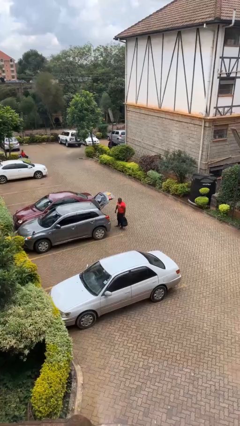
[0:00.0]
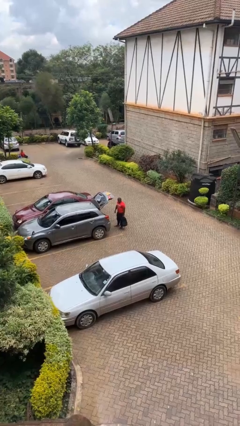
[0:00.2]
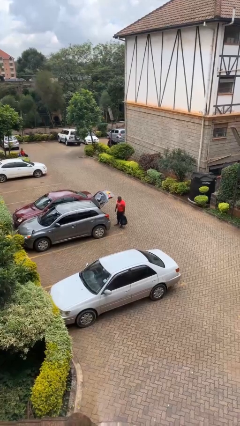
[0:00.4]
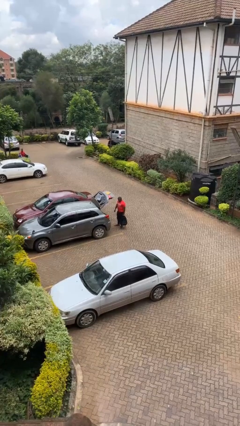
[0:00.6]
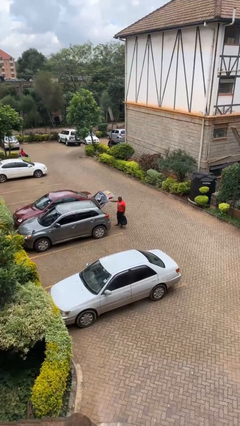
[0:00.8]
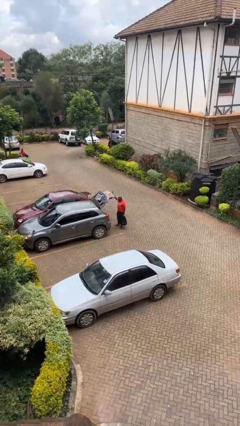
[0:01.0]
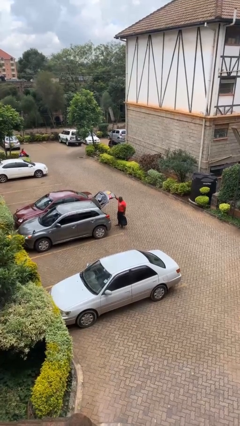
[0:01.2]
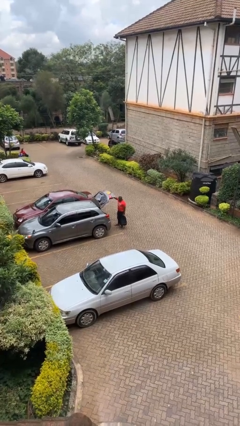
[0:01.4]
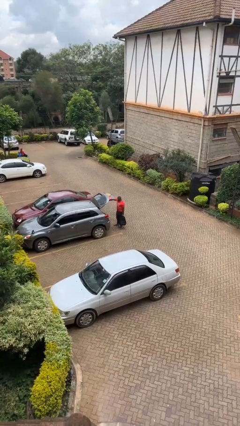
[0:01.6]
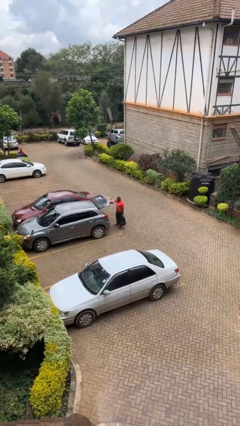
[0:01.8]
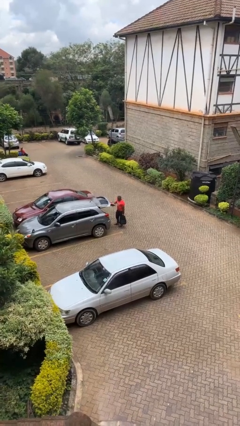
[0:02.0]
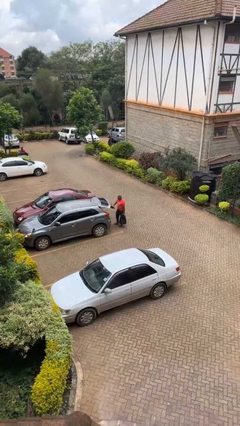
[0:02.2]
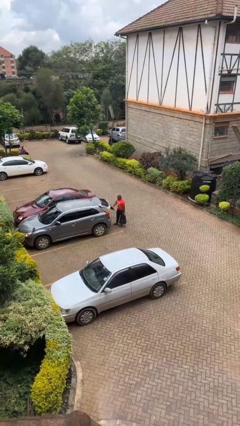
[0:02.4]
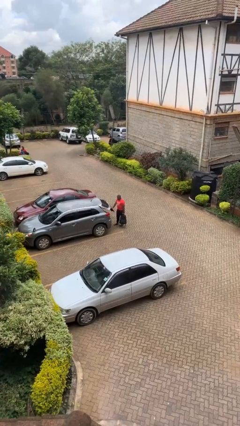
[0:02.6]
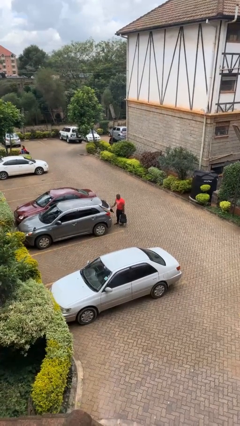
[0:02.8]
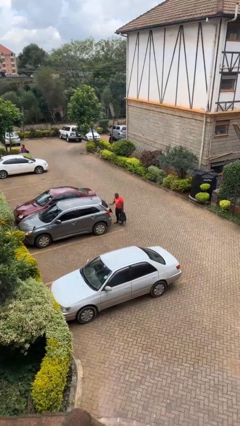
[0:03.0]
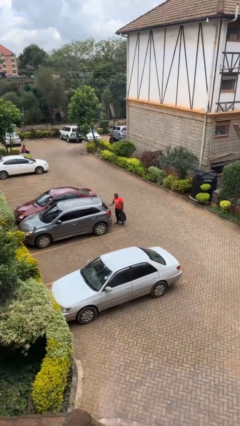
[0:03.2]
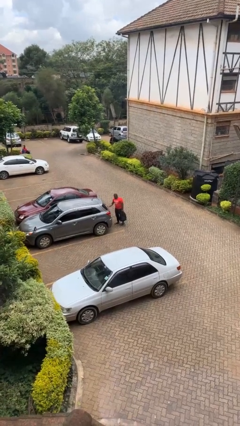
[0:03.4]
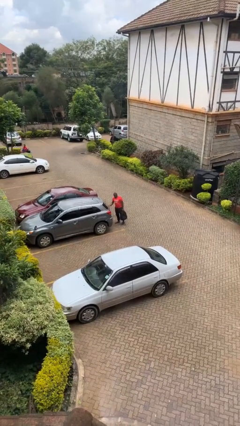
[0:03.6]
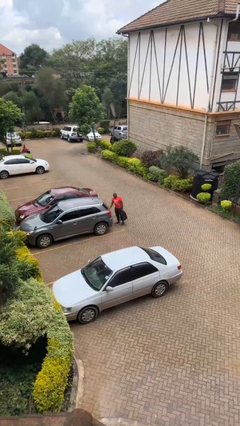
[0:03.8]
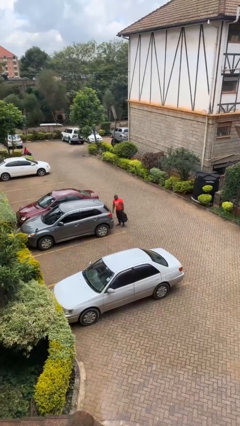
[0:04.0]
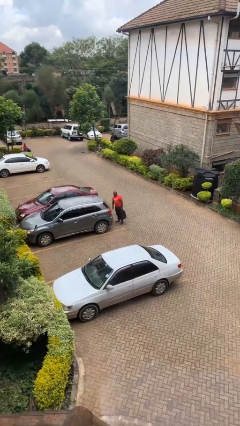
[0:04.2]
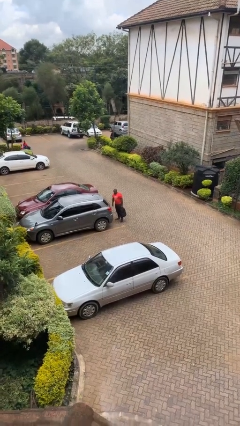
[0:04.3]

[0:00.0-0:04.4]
person closes car trunk

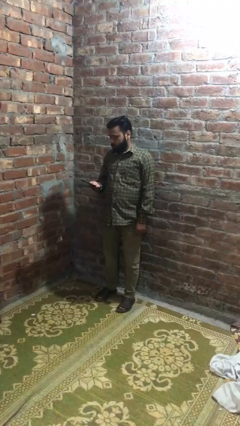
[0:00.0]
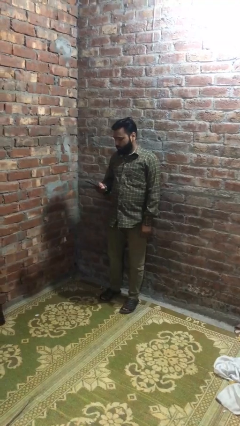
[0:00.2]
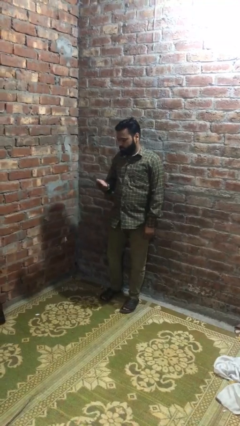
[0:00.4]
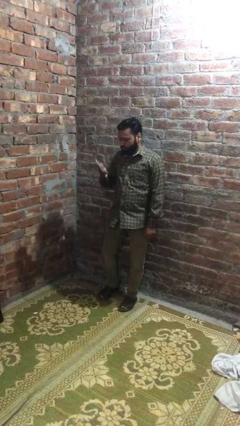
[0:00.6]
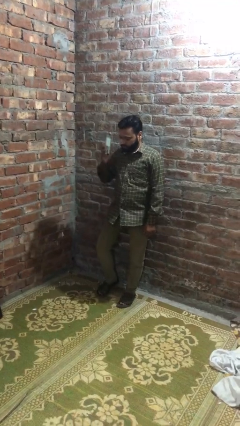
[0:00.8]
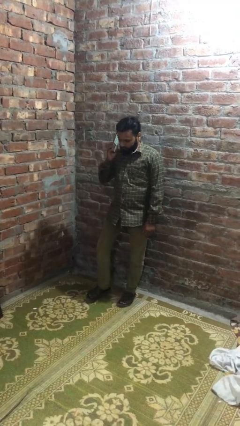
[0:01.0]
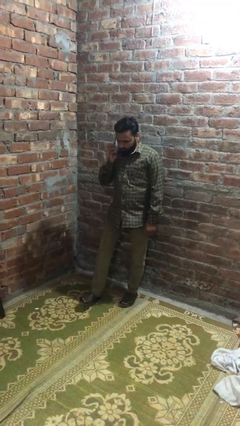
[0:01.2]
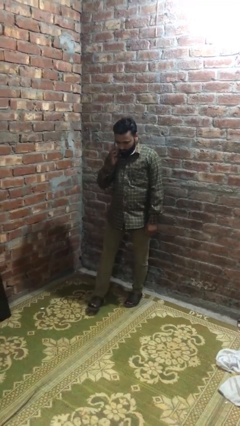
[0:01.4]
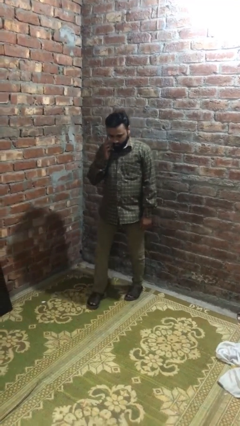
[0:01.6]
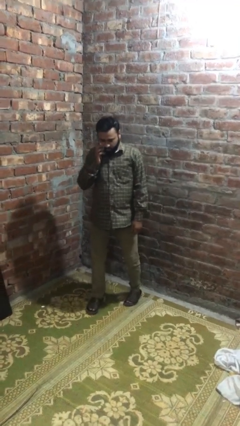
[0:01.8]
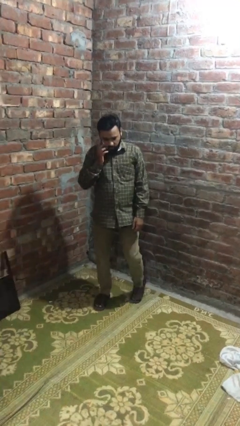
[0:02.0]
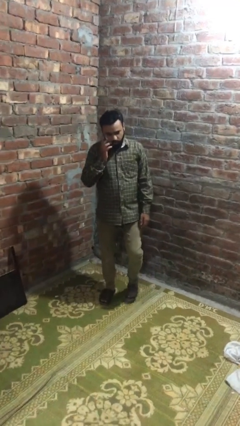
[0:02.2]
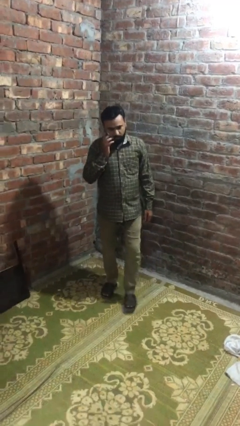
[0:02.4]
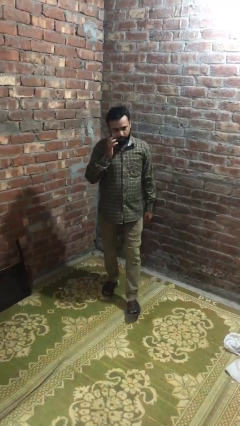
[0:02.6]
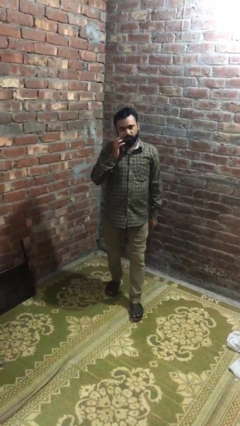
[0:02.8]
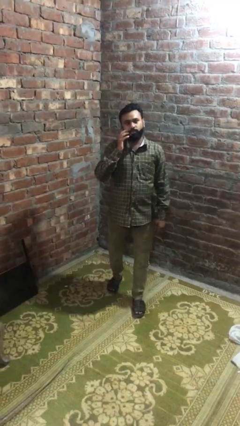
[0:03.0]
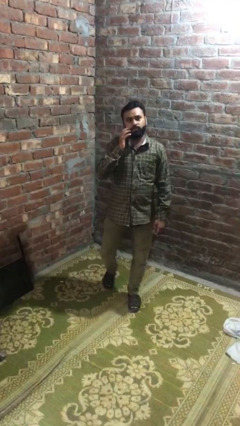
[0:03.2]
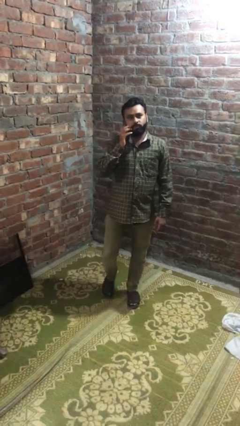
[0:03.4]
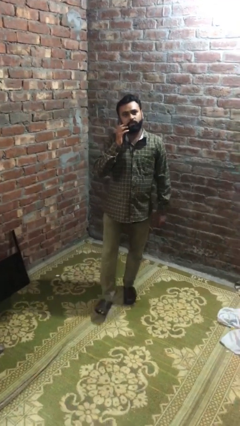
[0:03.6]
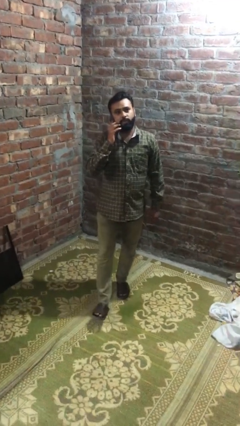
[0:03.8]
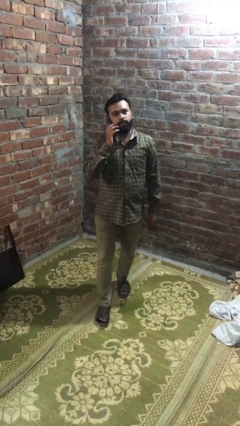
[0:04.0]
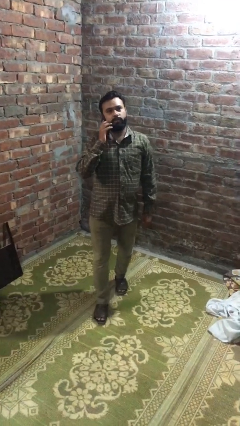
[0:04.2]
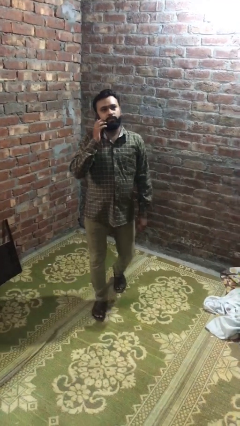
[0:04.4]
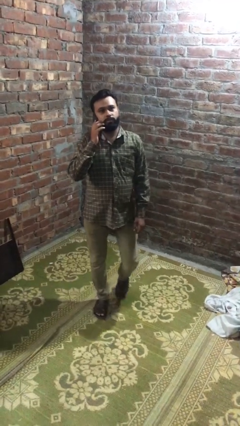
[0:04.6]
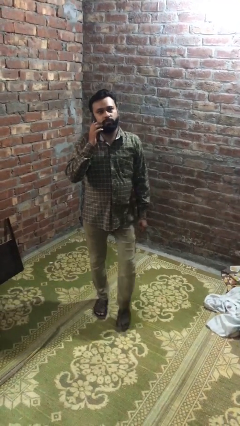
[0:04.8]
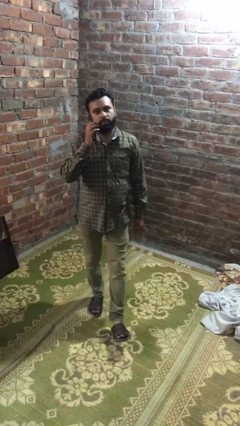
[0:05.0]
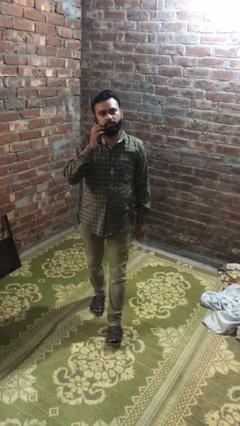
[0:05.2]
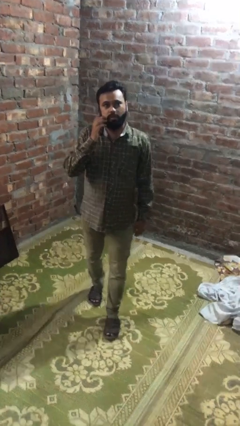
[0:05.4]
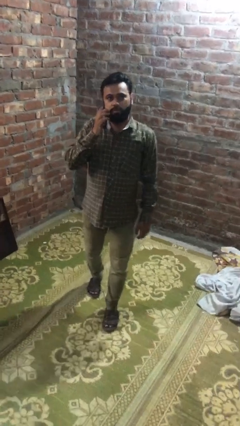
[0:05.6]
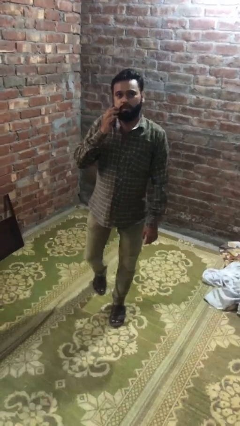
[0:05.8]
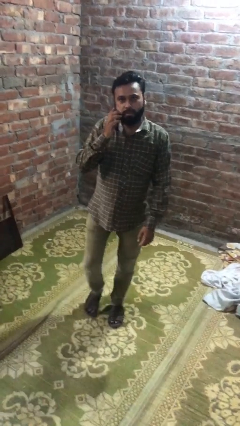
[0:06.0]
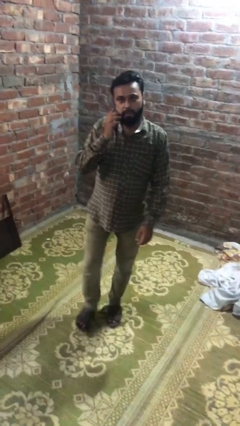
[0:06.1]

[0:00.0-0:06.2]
person talks on phone

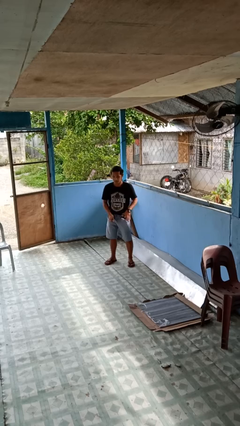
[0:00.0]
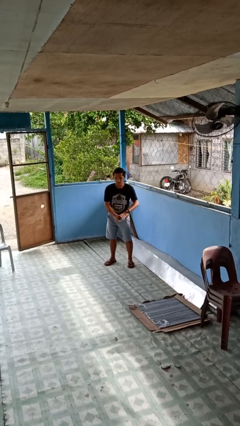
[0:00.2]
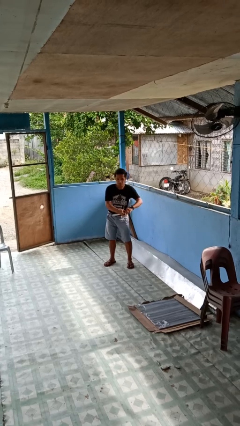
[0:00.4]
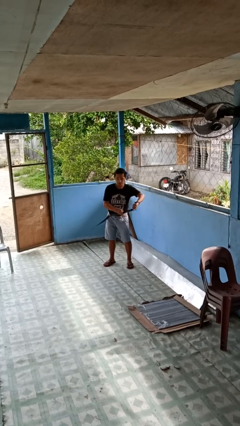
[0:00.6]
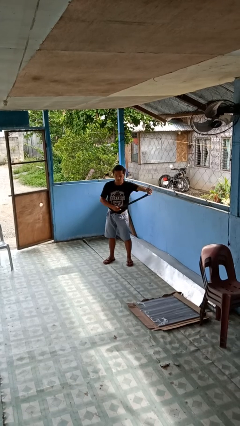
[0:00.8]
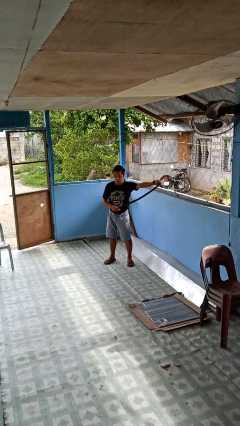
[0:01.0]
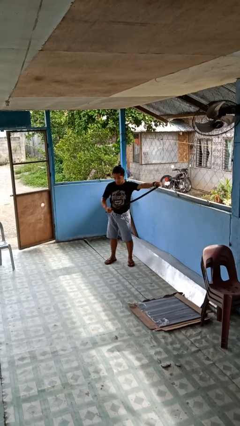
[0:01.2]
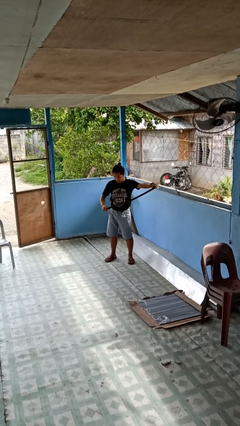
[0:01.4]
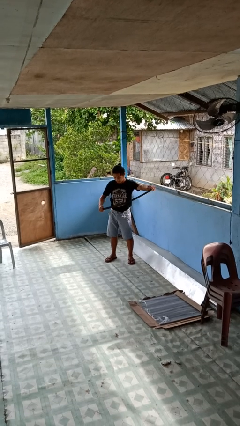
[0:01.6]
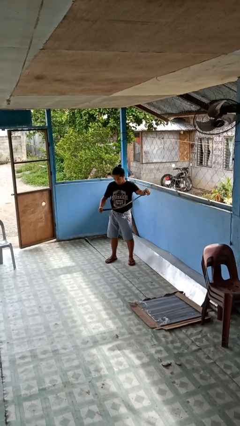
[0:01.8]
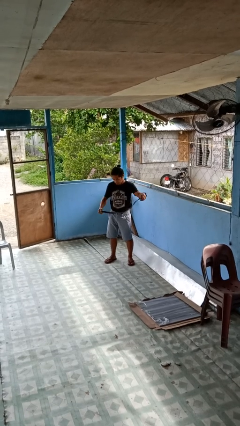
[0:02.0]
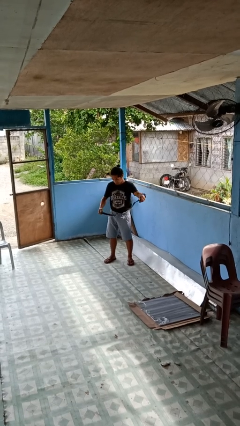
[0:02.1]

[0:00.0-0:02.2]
person takes off belt

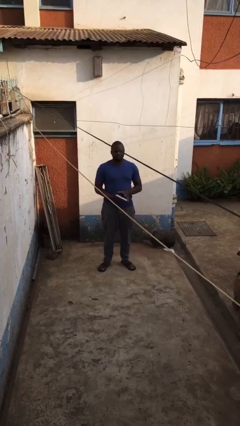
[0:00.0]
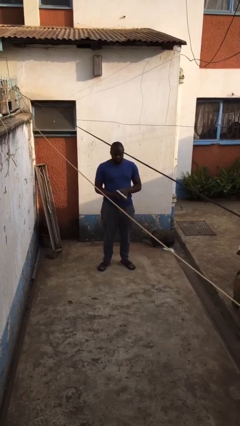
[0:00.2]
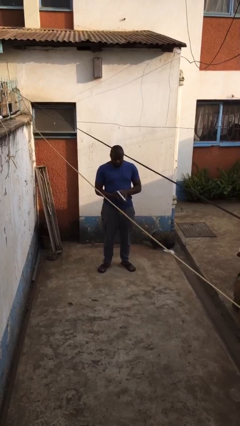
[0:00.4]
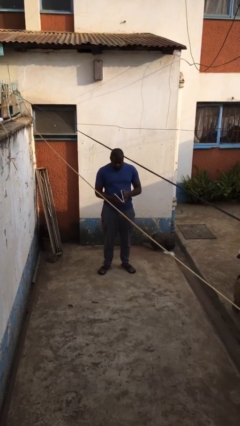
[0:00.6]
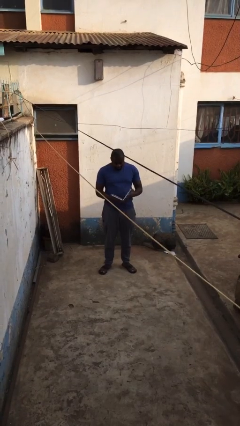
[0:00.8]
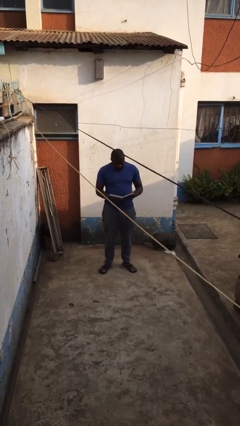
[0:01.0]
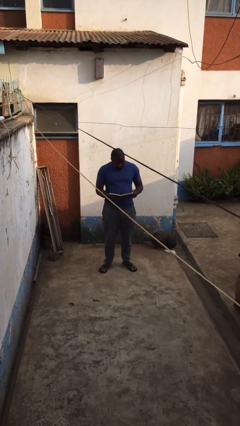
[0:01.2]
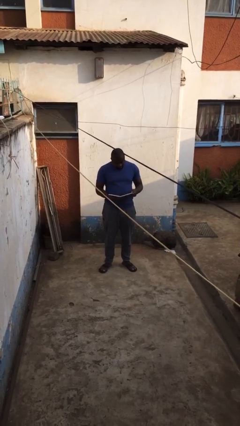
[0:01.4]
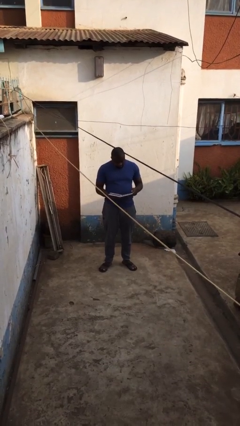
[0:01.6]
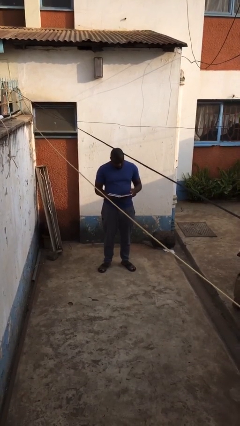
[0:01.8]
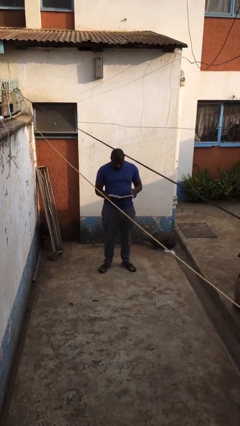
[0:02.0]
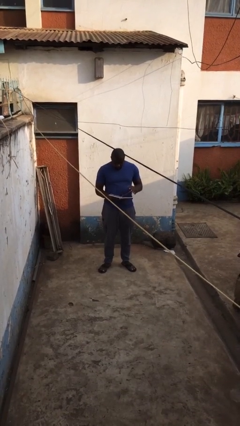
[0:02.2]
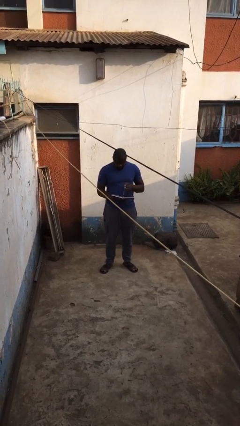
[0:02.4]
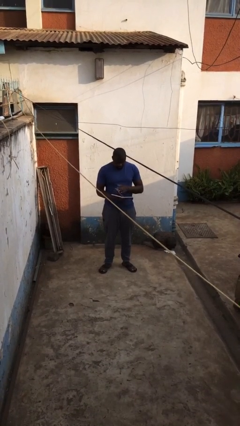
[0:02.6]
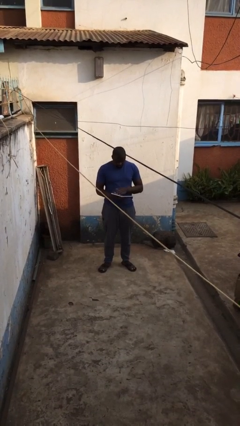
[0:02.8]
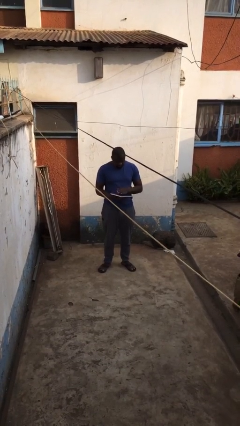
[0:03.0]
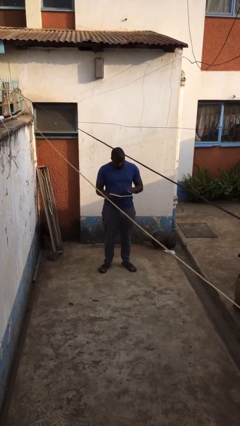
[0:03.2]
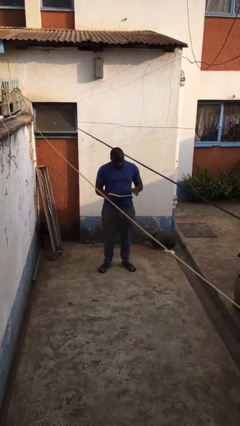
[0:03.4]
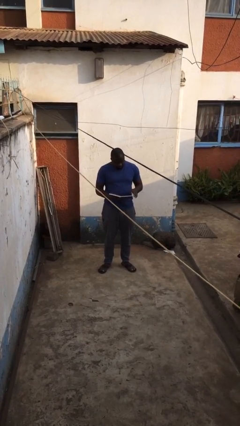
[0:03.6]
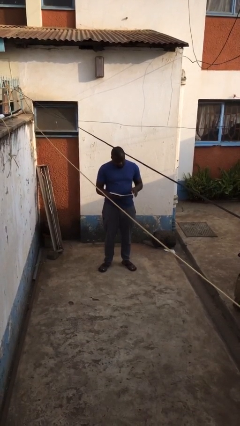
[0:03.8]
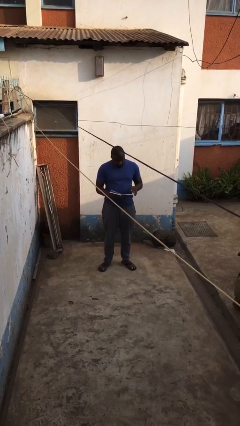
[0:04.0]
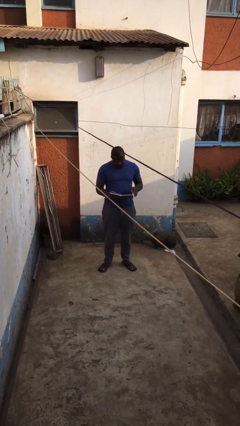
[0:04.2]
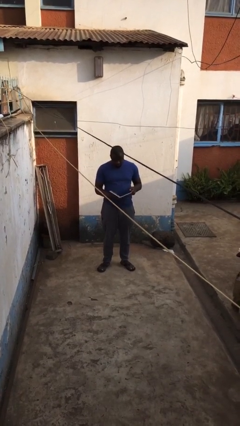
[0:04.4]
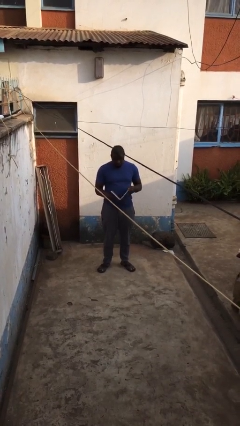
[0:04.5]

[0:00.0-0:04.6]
person reads book

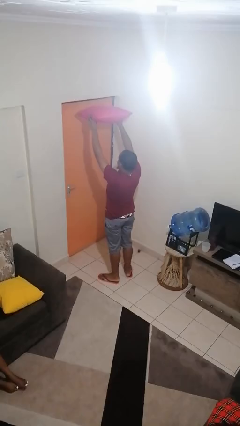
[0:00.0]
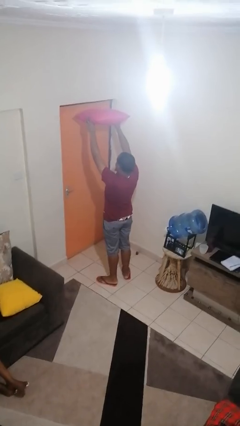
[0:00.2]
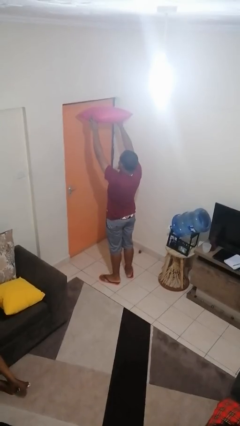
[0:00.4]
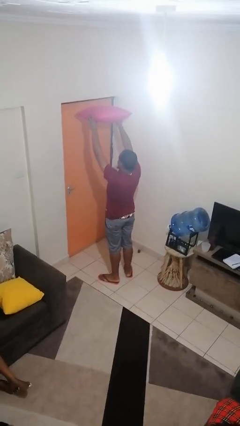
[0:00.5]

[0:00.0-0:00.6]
person drops object
